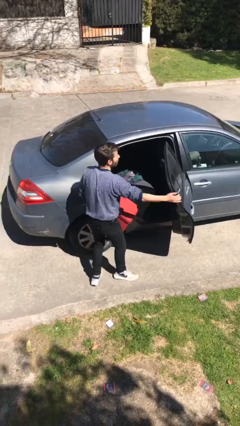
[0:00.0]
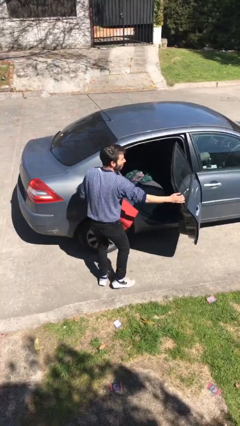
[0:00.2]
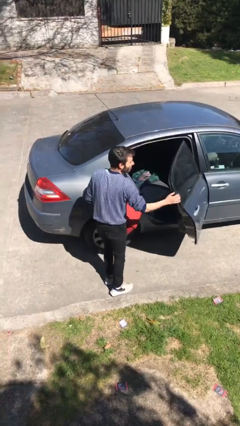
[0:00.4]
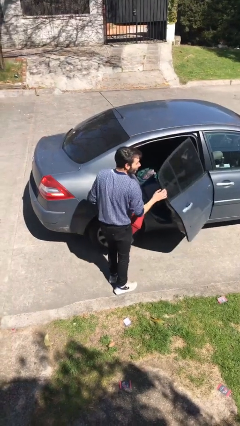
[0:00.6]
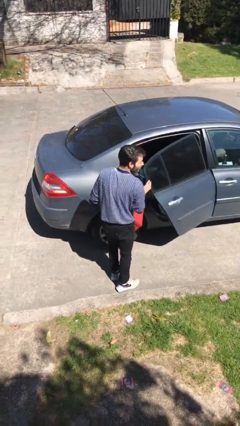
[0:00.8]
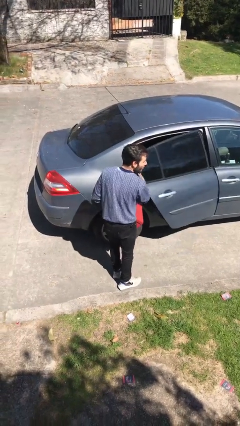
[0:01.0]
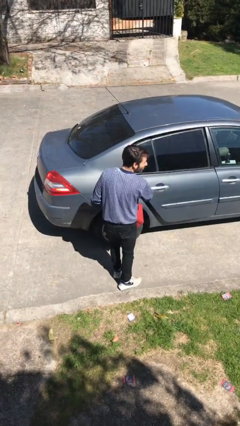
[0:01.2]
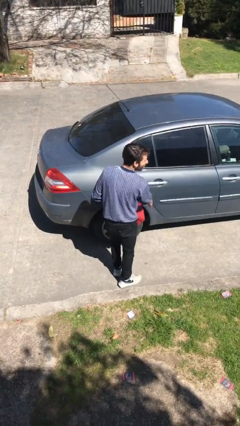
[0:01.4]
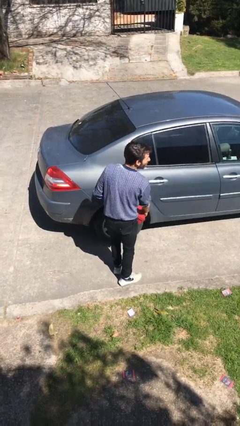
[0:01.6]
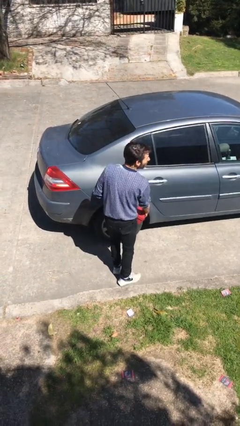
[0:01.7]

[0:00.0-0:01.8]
person closes car door

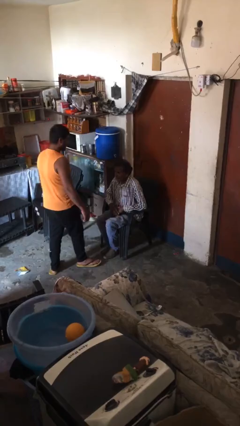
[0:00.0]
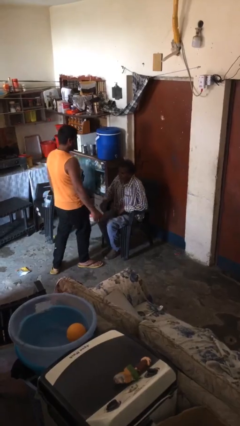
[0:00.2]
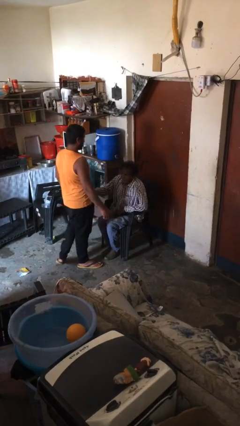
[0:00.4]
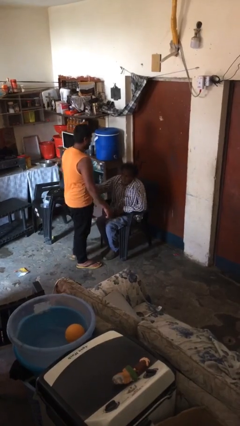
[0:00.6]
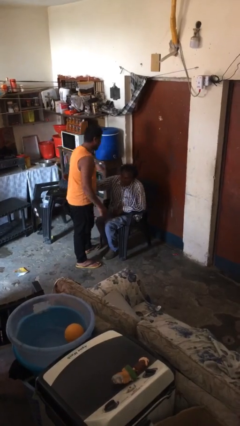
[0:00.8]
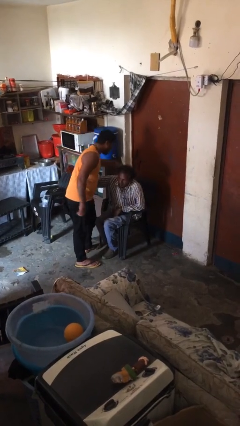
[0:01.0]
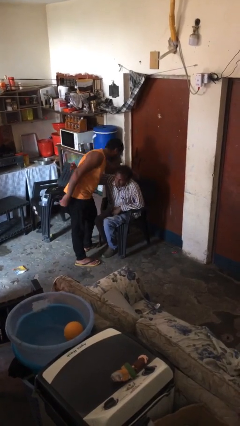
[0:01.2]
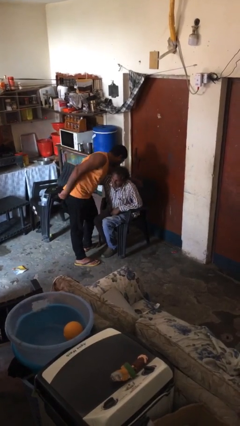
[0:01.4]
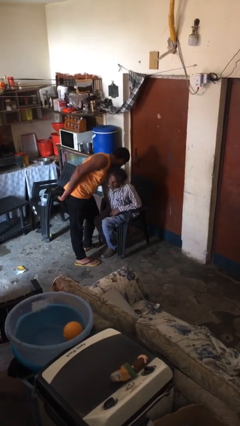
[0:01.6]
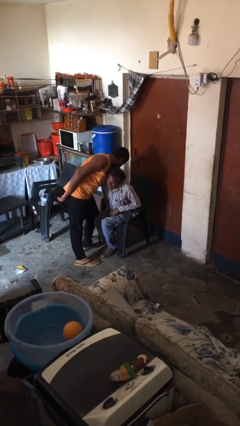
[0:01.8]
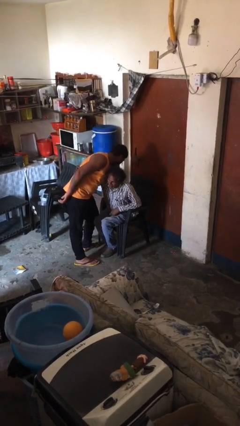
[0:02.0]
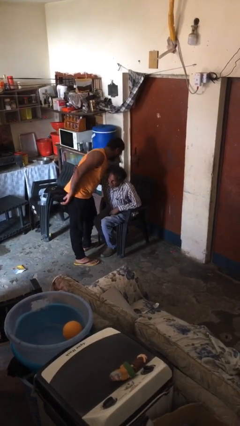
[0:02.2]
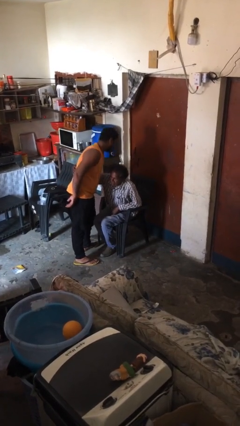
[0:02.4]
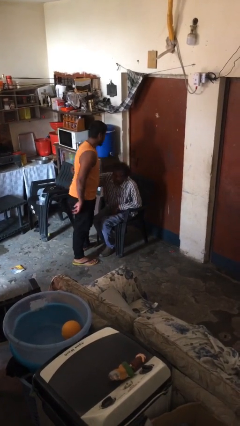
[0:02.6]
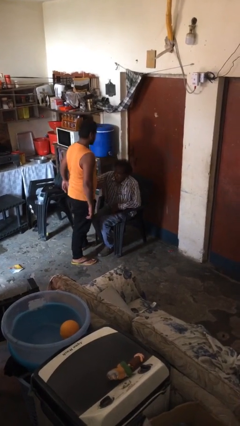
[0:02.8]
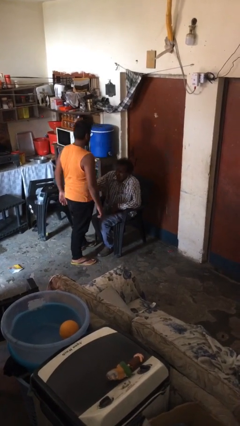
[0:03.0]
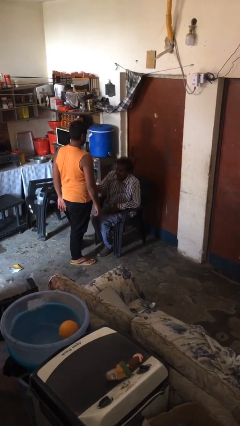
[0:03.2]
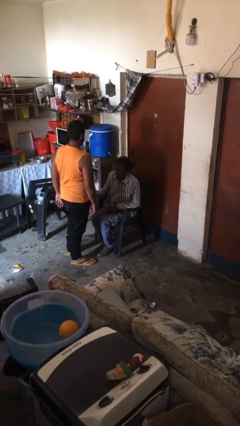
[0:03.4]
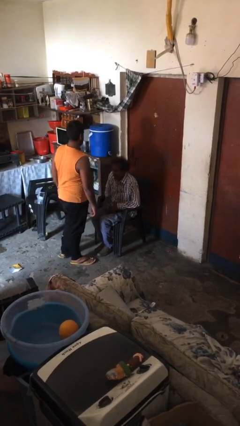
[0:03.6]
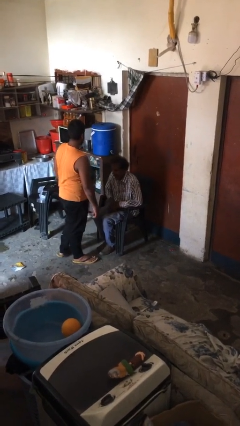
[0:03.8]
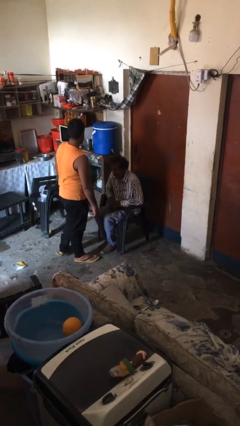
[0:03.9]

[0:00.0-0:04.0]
person embraces person

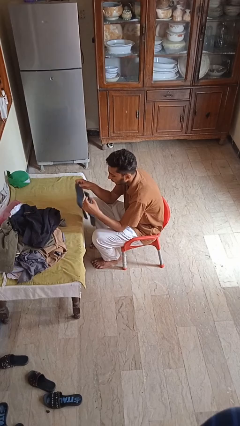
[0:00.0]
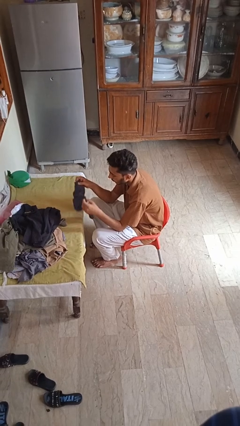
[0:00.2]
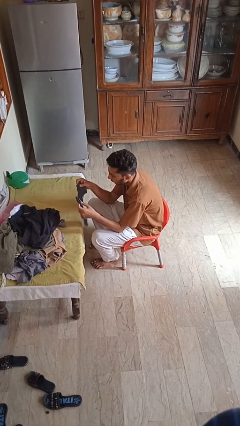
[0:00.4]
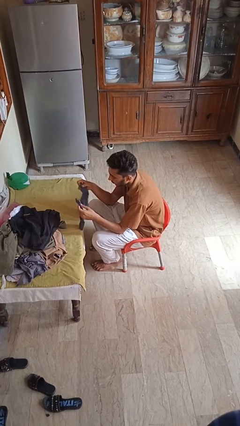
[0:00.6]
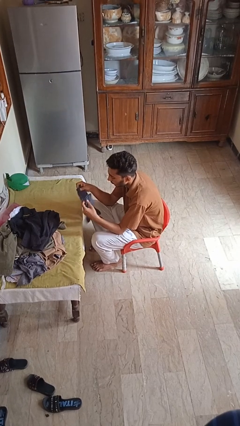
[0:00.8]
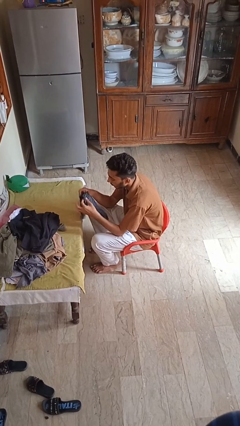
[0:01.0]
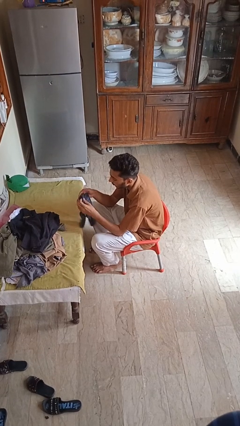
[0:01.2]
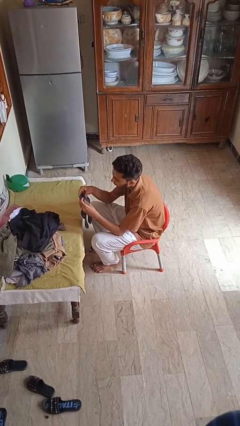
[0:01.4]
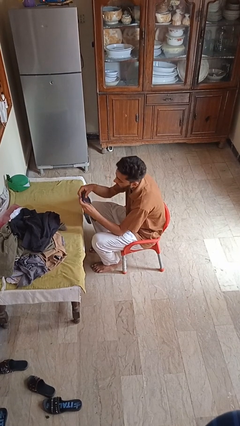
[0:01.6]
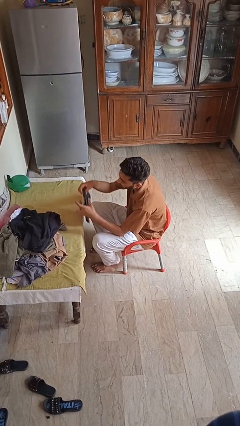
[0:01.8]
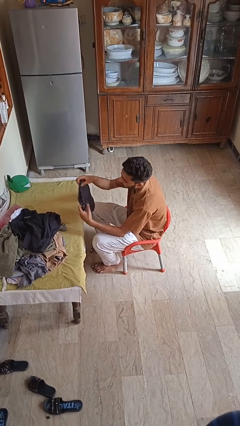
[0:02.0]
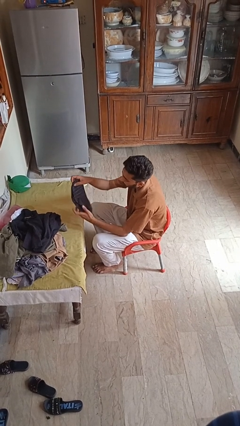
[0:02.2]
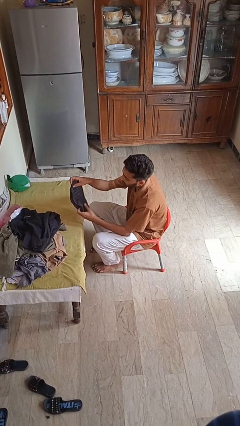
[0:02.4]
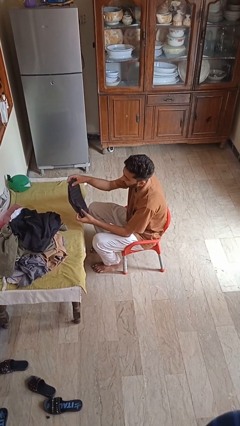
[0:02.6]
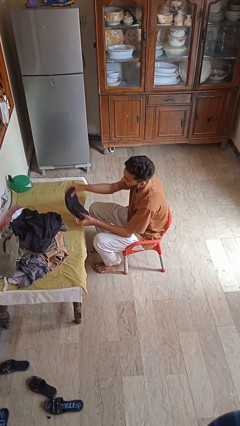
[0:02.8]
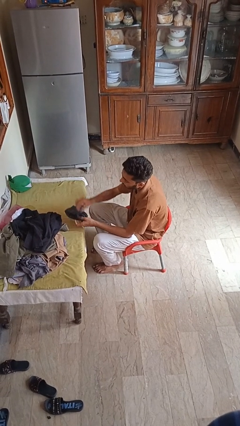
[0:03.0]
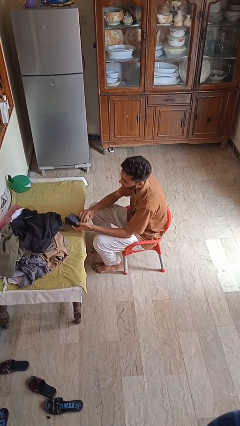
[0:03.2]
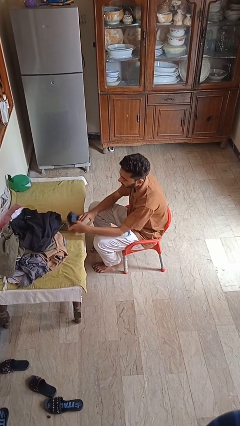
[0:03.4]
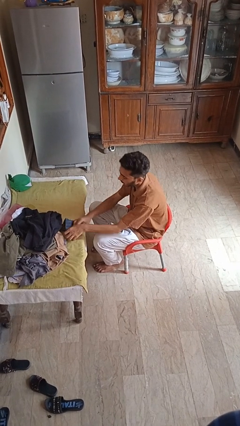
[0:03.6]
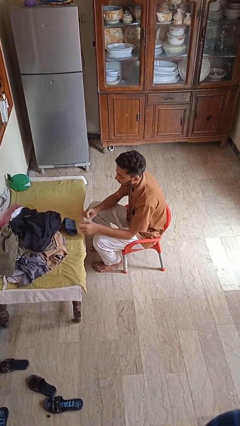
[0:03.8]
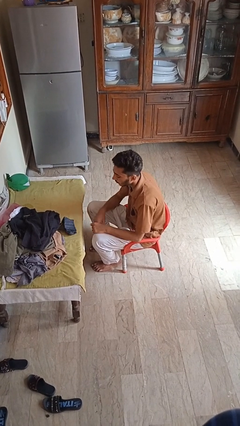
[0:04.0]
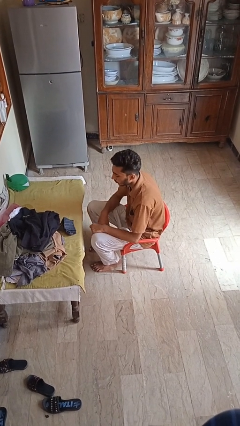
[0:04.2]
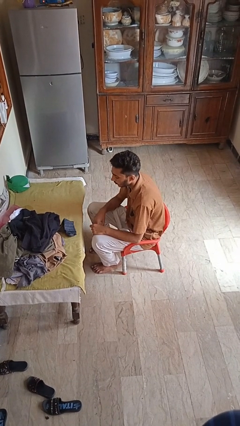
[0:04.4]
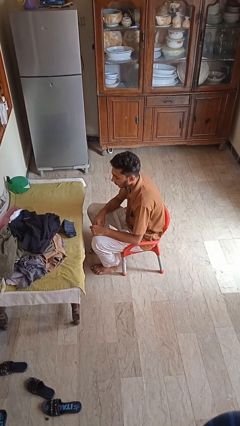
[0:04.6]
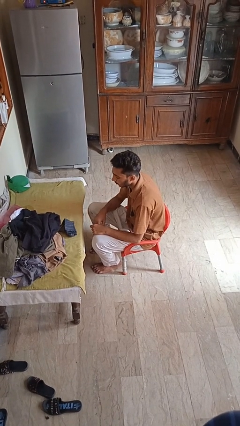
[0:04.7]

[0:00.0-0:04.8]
person folds socks

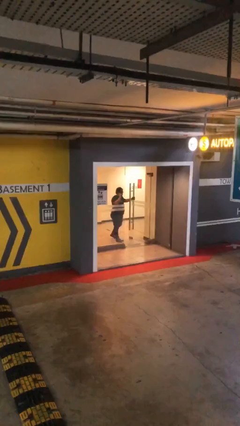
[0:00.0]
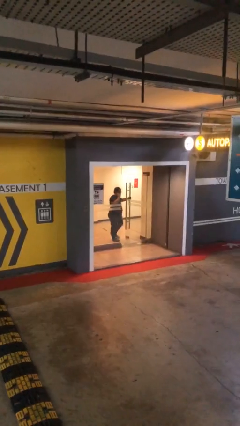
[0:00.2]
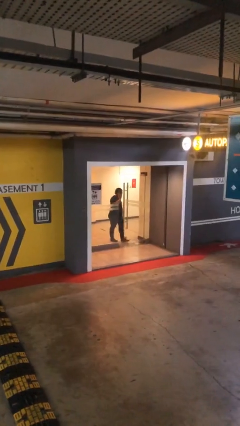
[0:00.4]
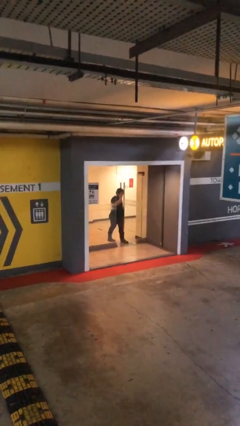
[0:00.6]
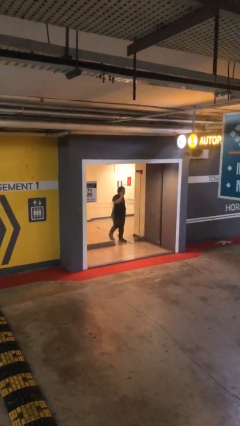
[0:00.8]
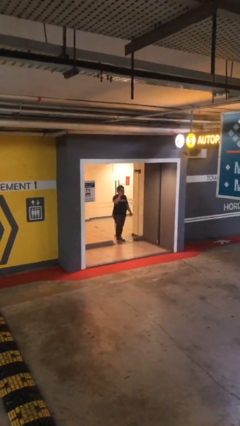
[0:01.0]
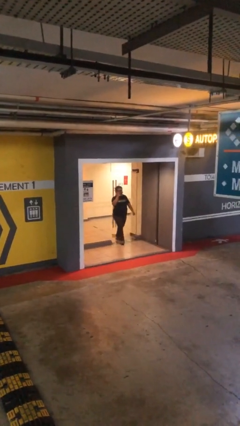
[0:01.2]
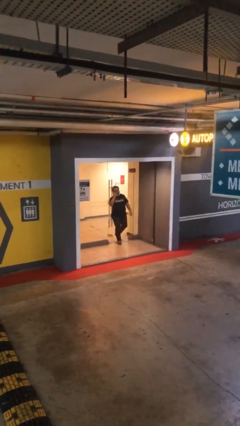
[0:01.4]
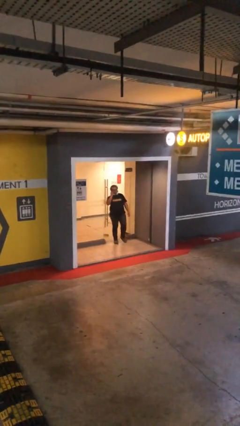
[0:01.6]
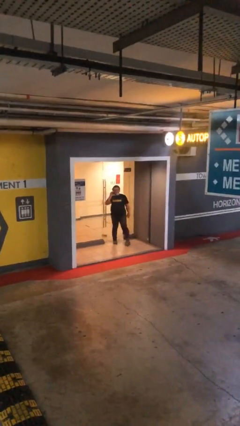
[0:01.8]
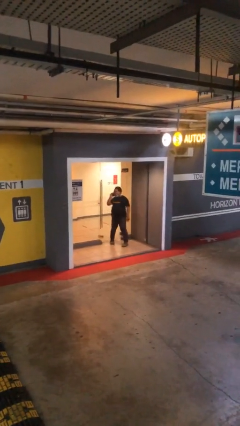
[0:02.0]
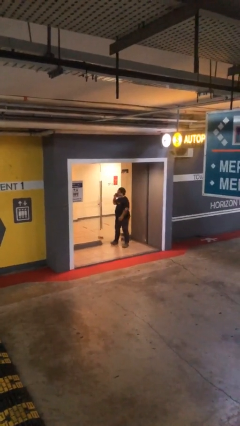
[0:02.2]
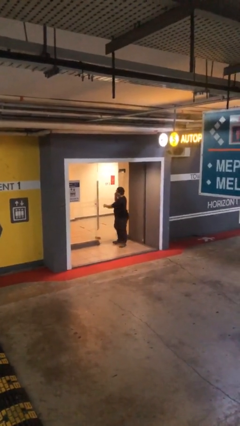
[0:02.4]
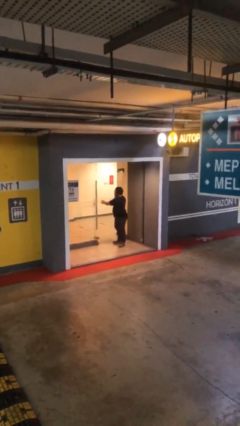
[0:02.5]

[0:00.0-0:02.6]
person enters scene through structure

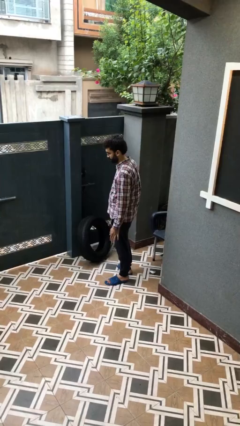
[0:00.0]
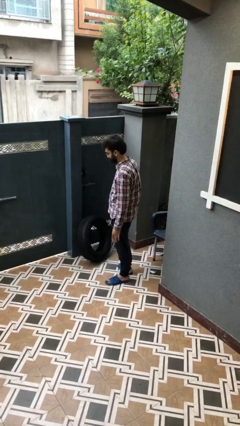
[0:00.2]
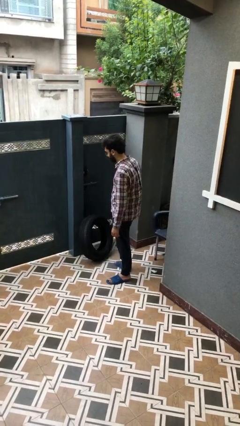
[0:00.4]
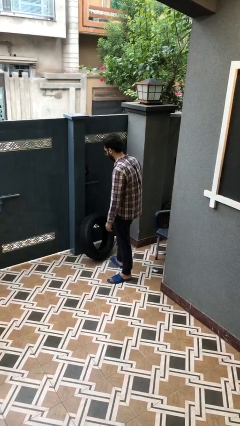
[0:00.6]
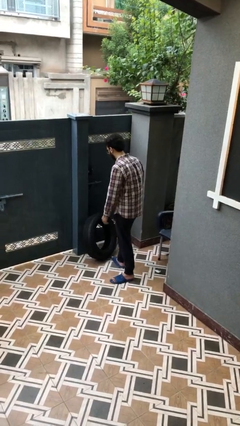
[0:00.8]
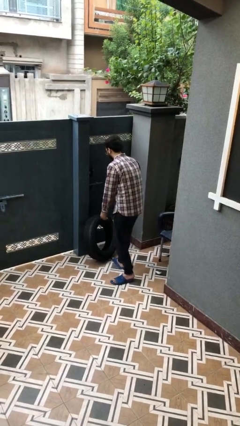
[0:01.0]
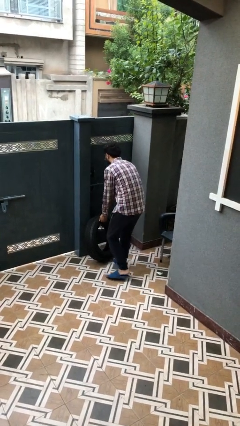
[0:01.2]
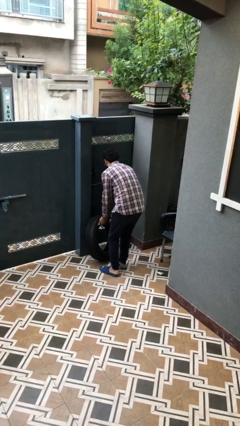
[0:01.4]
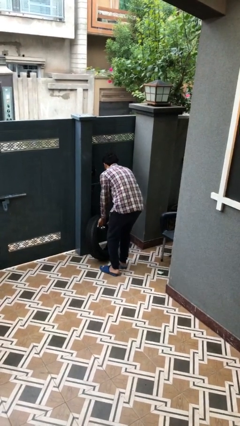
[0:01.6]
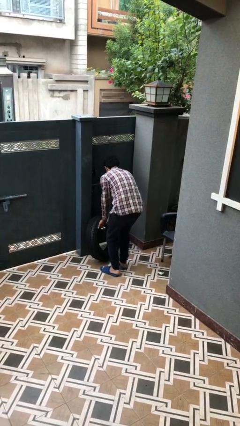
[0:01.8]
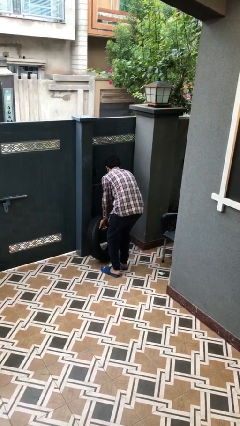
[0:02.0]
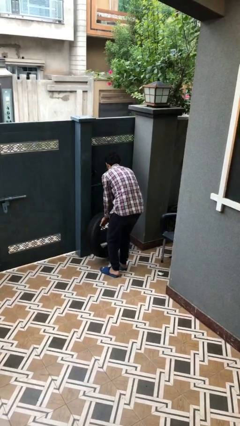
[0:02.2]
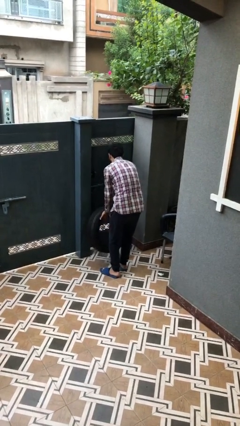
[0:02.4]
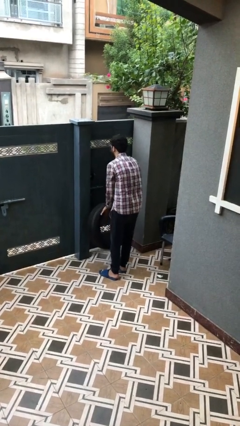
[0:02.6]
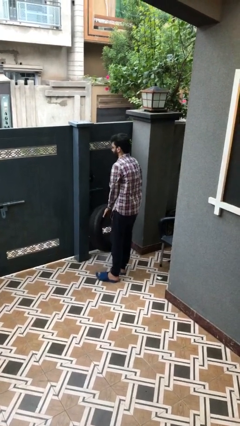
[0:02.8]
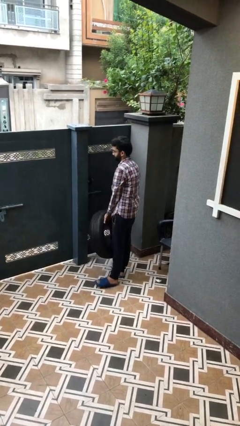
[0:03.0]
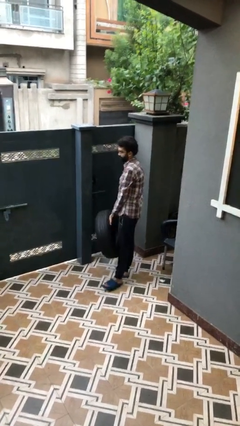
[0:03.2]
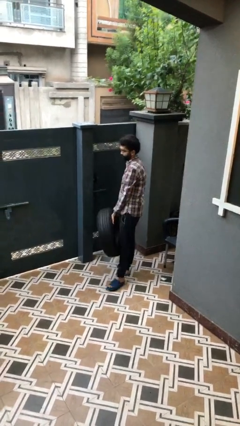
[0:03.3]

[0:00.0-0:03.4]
person picks up object from floor

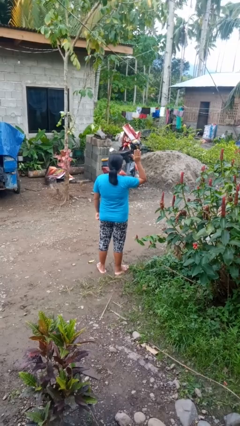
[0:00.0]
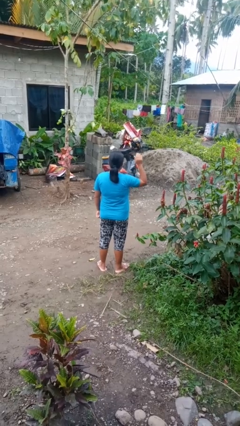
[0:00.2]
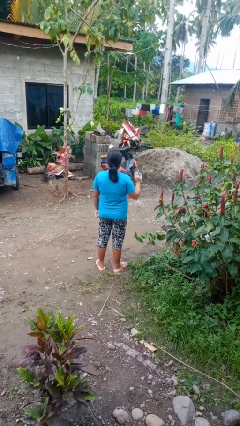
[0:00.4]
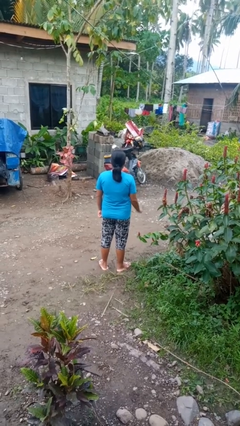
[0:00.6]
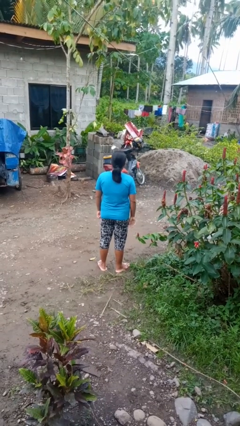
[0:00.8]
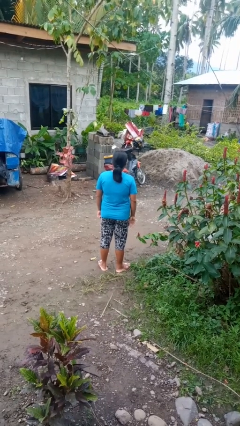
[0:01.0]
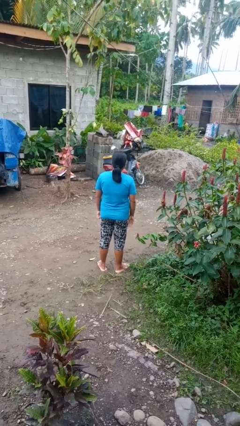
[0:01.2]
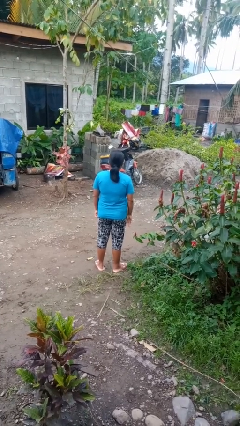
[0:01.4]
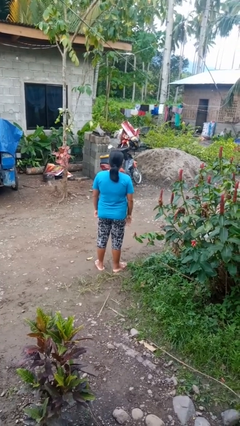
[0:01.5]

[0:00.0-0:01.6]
person gestures lower hand
